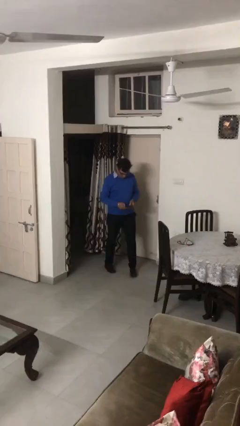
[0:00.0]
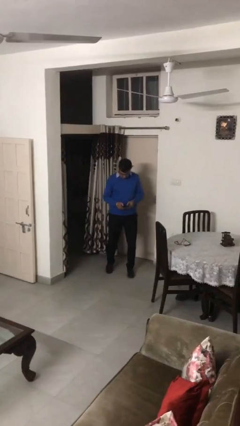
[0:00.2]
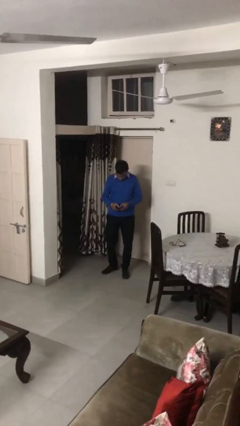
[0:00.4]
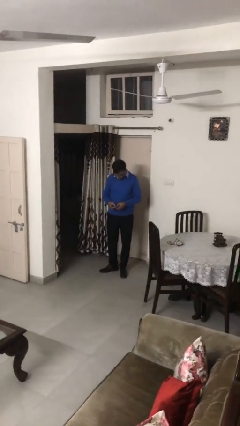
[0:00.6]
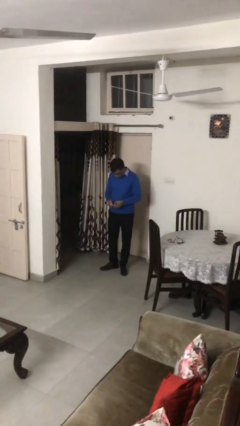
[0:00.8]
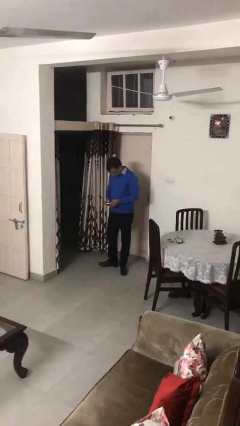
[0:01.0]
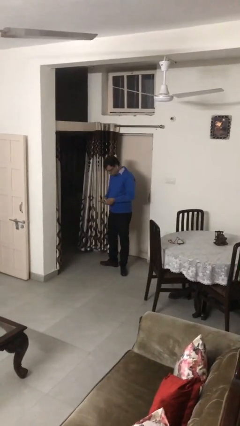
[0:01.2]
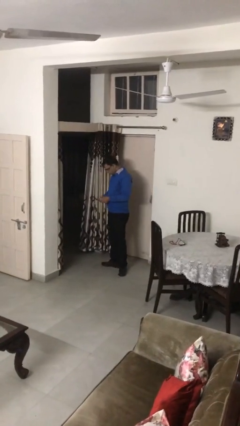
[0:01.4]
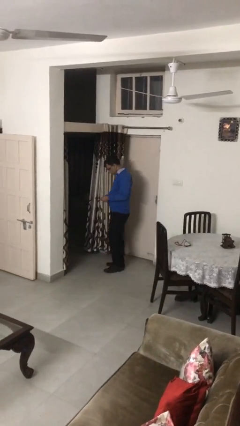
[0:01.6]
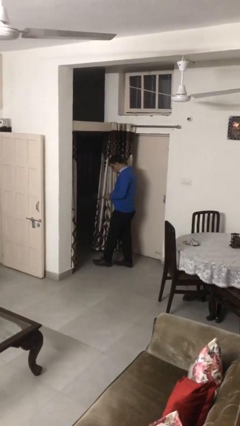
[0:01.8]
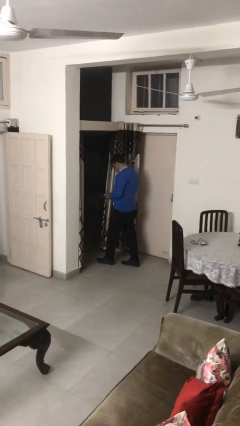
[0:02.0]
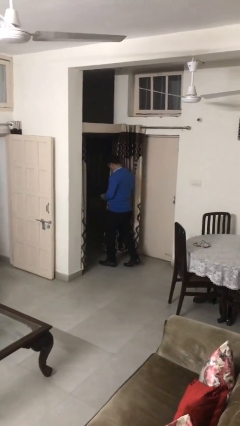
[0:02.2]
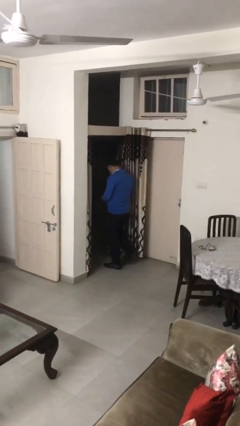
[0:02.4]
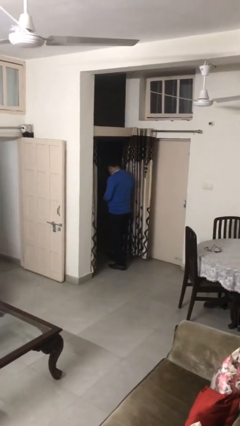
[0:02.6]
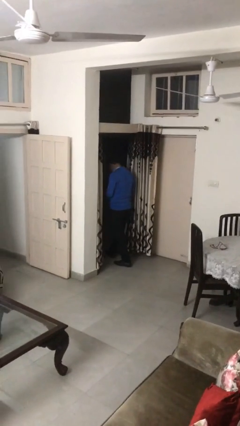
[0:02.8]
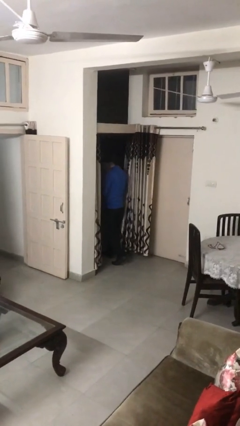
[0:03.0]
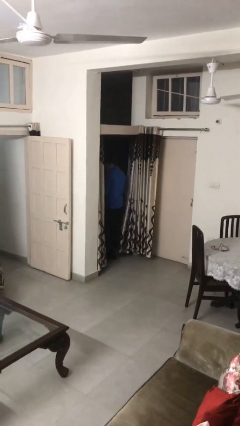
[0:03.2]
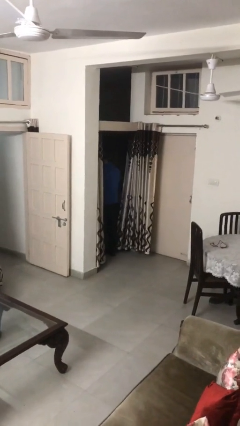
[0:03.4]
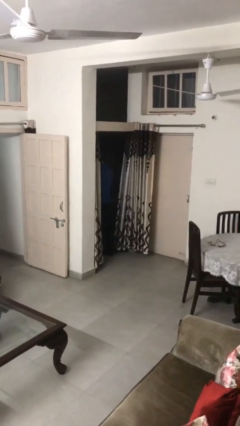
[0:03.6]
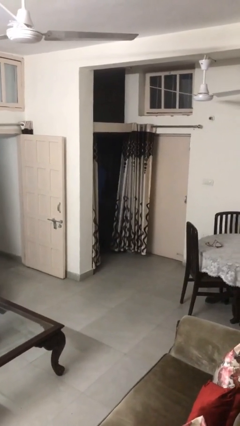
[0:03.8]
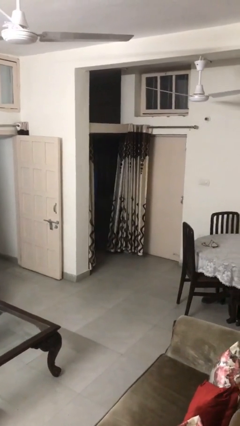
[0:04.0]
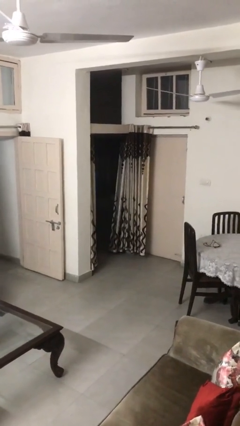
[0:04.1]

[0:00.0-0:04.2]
person exits scene through structure

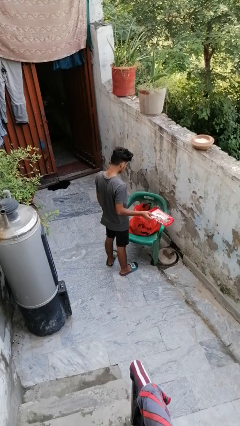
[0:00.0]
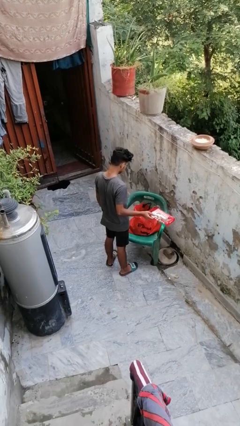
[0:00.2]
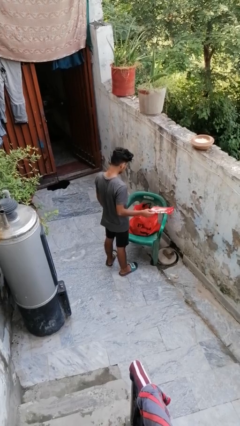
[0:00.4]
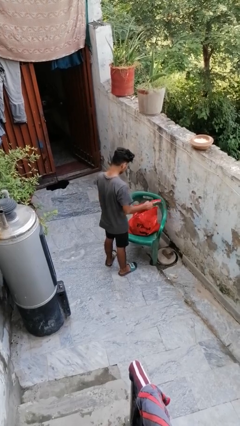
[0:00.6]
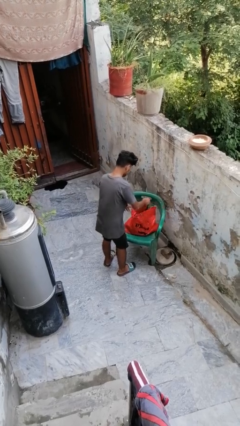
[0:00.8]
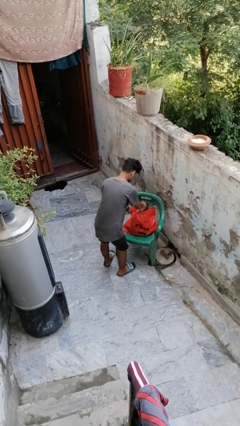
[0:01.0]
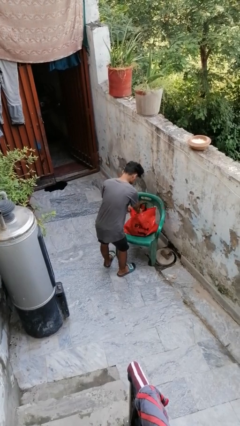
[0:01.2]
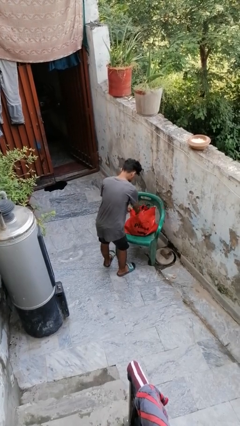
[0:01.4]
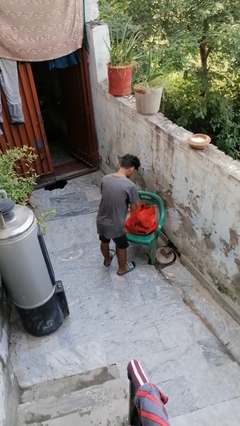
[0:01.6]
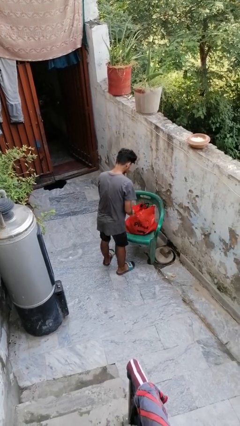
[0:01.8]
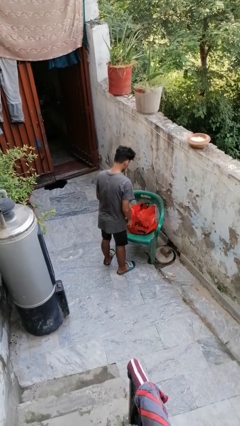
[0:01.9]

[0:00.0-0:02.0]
person puts object into bag

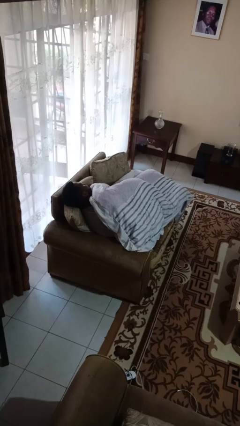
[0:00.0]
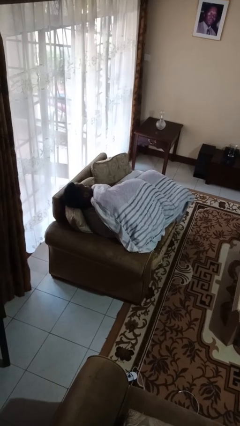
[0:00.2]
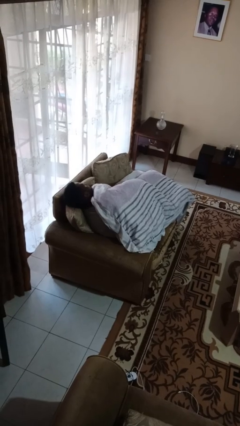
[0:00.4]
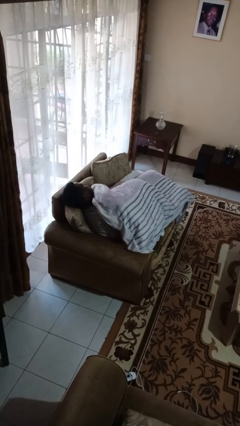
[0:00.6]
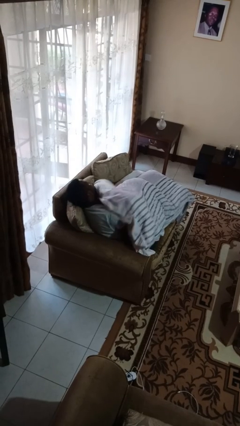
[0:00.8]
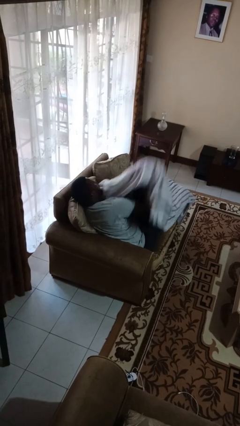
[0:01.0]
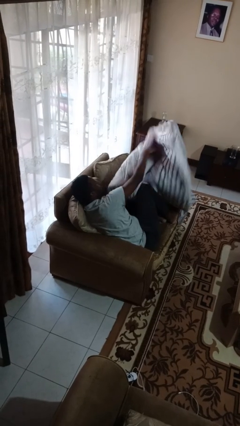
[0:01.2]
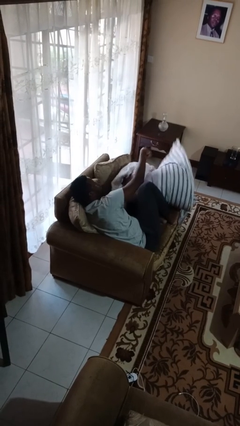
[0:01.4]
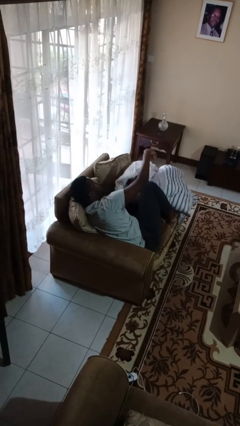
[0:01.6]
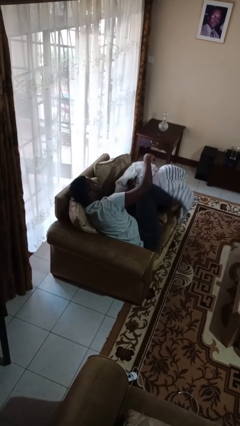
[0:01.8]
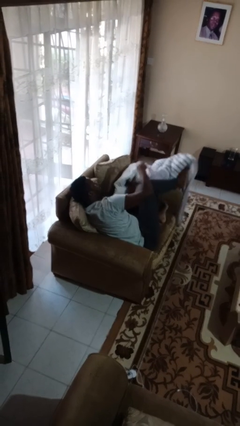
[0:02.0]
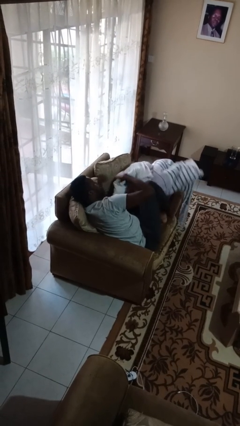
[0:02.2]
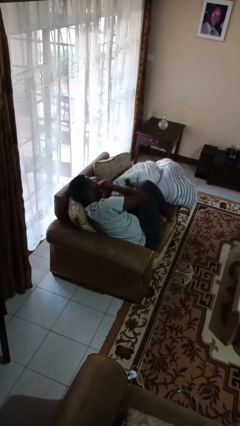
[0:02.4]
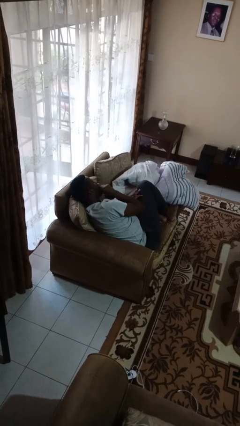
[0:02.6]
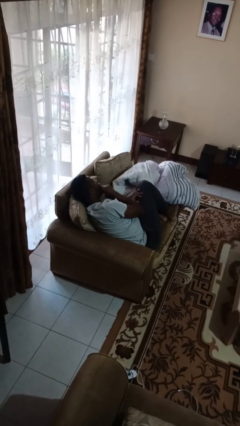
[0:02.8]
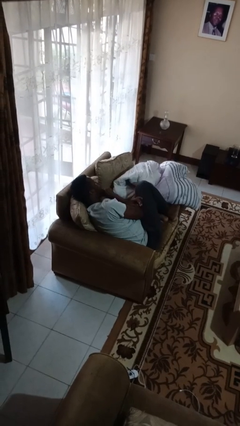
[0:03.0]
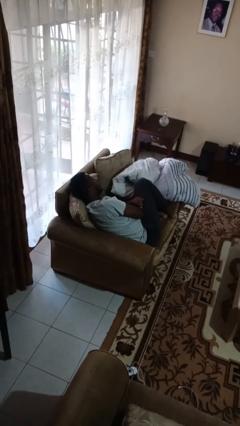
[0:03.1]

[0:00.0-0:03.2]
person uncovers with blanket

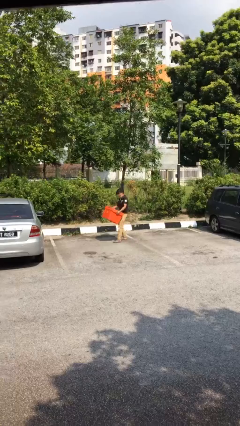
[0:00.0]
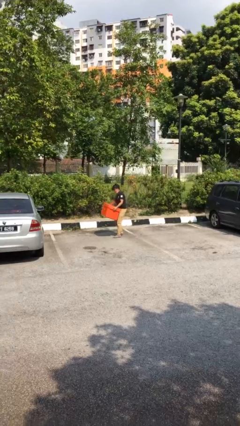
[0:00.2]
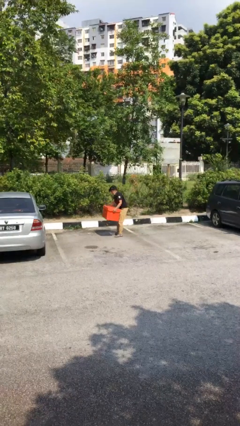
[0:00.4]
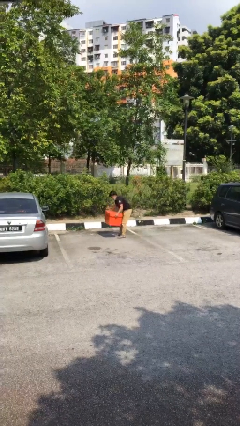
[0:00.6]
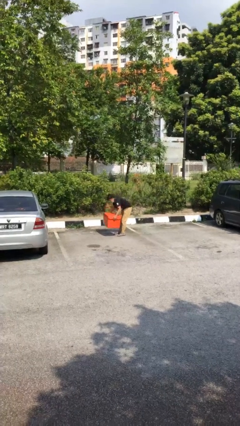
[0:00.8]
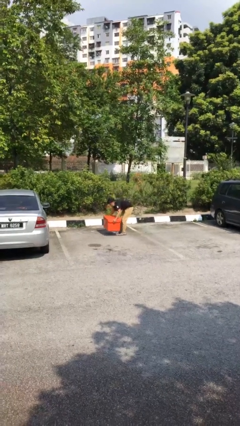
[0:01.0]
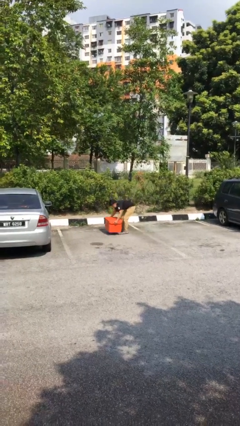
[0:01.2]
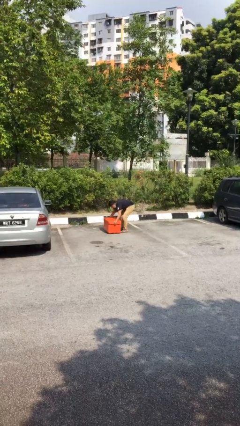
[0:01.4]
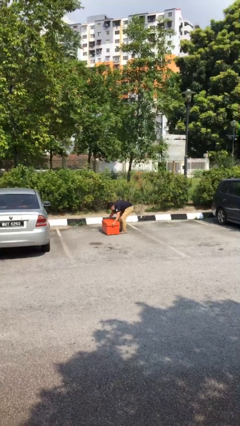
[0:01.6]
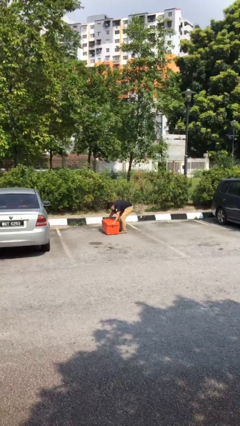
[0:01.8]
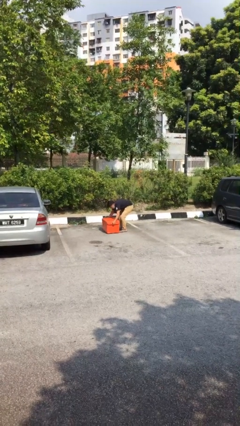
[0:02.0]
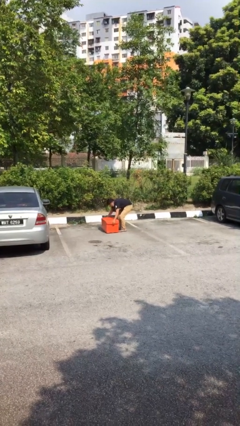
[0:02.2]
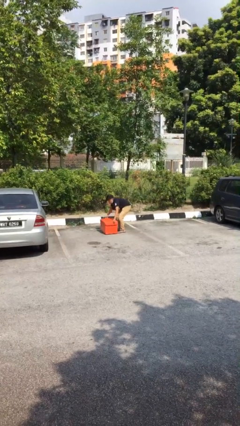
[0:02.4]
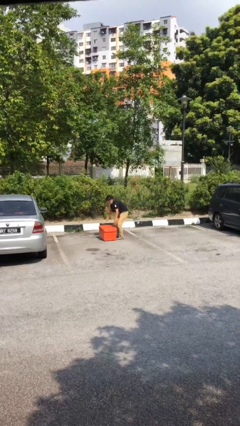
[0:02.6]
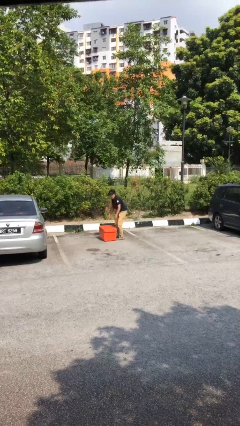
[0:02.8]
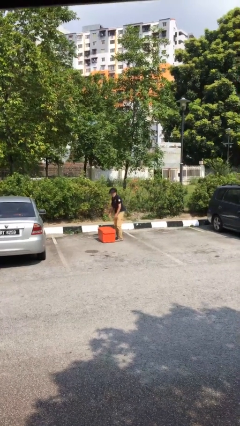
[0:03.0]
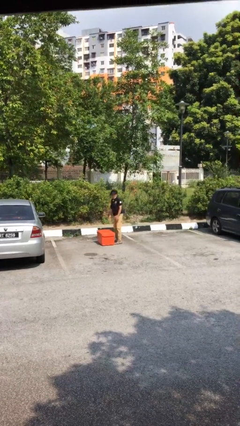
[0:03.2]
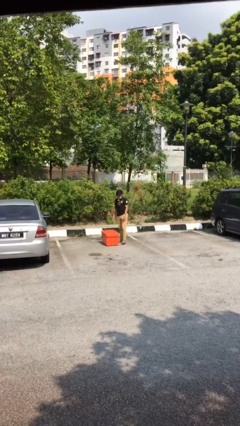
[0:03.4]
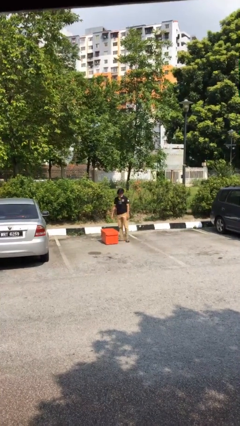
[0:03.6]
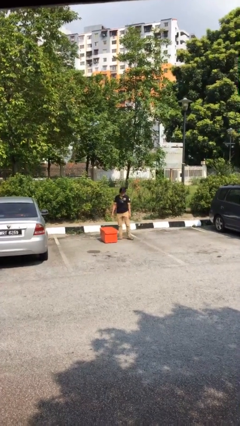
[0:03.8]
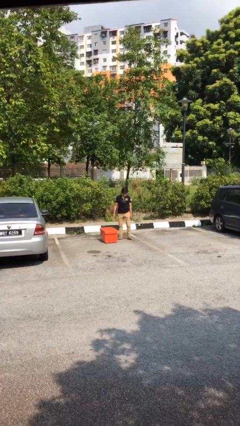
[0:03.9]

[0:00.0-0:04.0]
person puts down object on floor

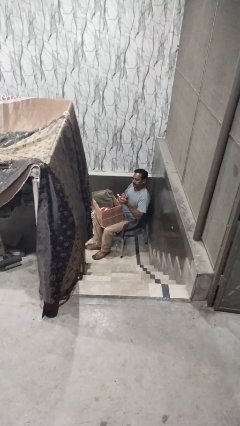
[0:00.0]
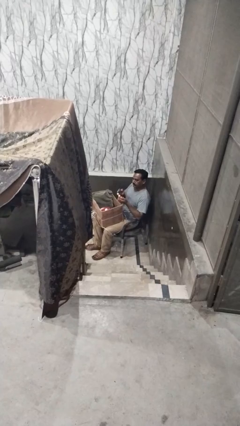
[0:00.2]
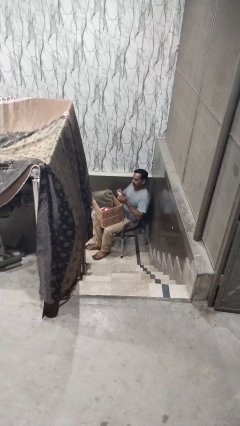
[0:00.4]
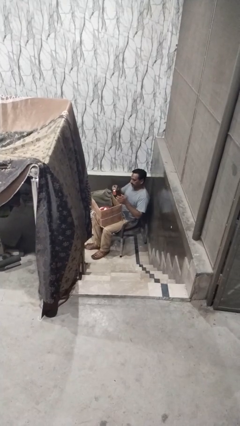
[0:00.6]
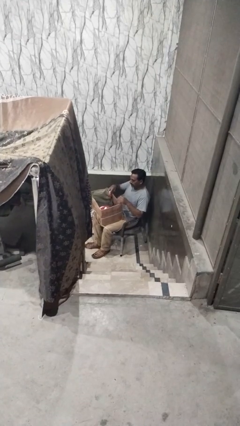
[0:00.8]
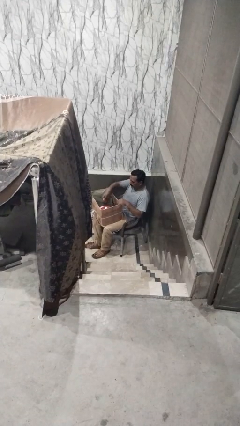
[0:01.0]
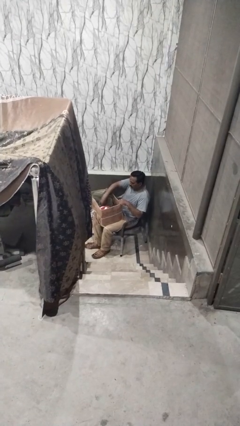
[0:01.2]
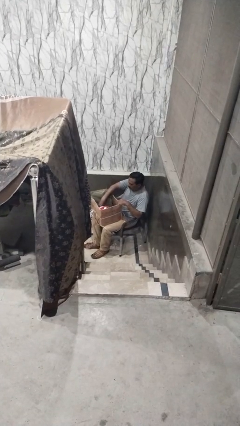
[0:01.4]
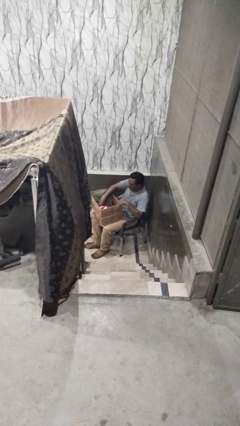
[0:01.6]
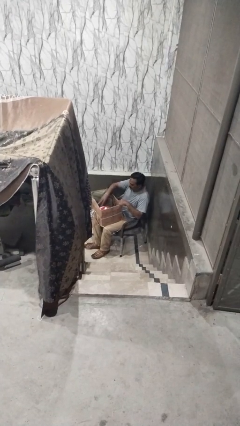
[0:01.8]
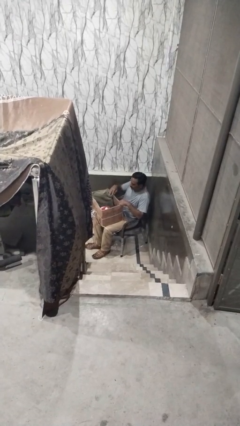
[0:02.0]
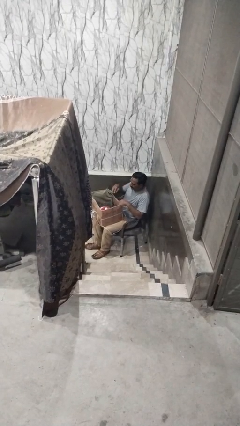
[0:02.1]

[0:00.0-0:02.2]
person puts object into box

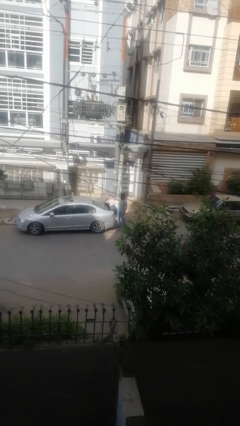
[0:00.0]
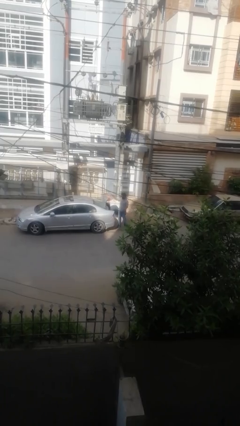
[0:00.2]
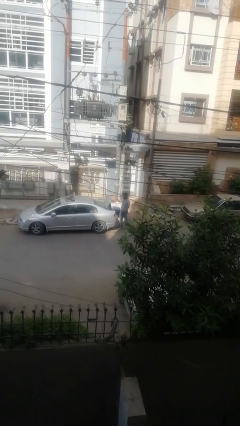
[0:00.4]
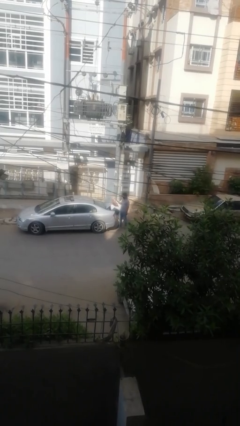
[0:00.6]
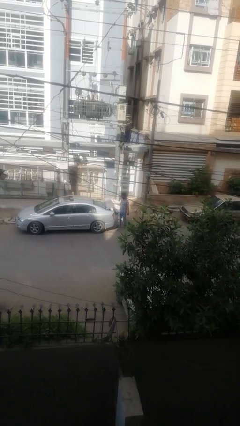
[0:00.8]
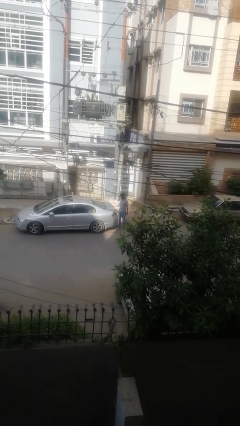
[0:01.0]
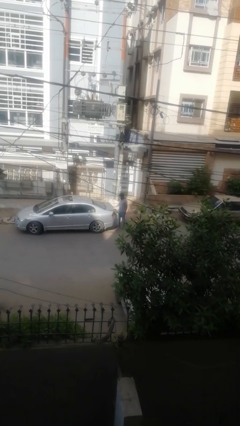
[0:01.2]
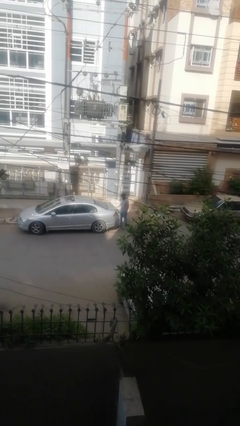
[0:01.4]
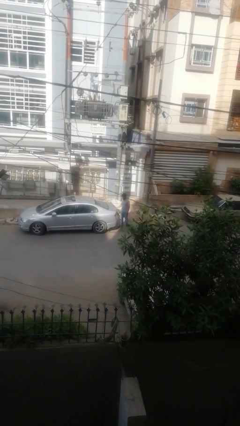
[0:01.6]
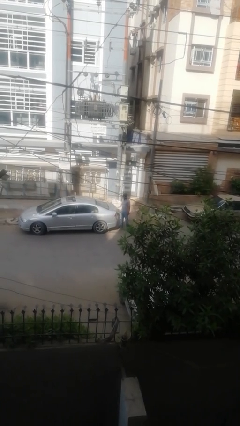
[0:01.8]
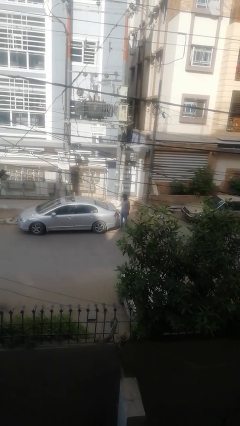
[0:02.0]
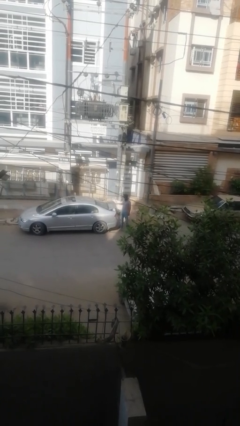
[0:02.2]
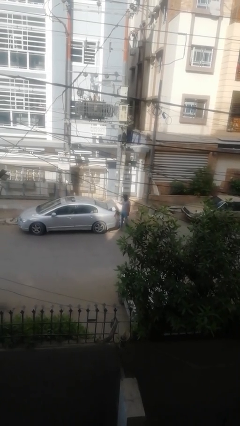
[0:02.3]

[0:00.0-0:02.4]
person enters car
